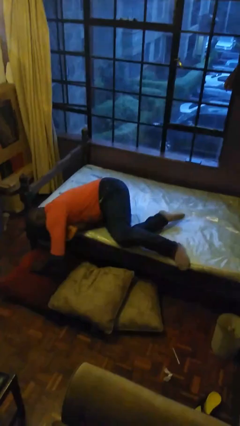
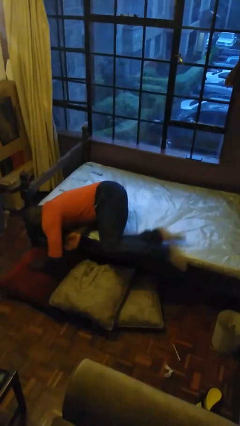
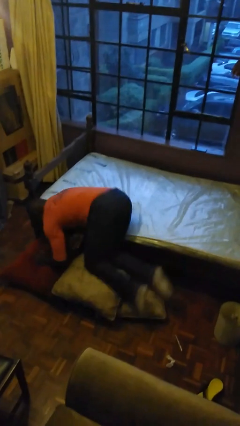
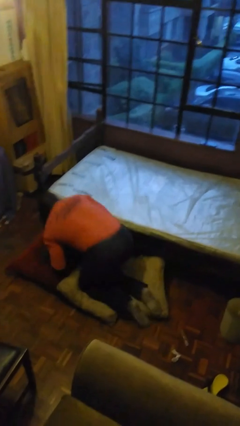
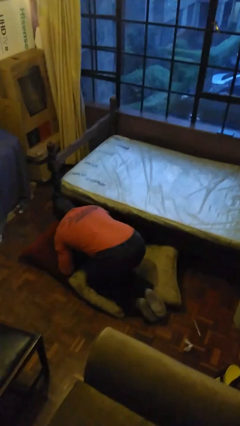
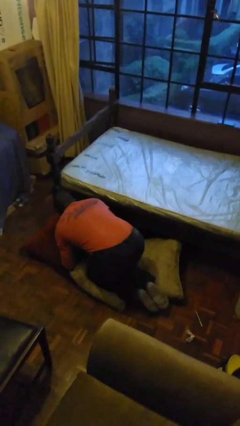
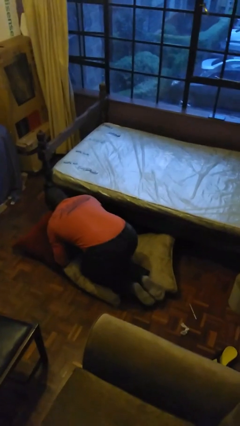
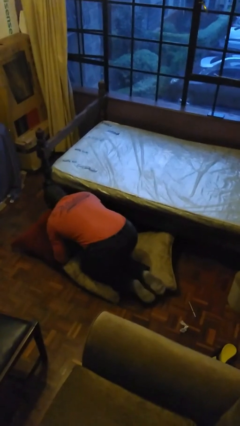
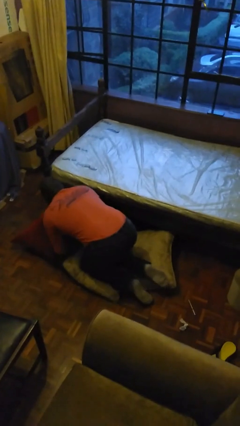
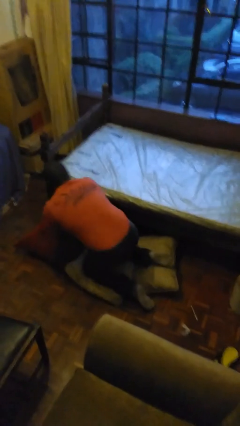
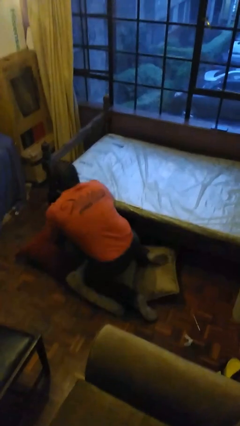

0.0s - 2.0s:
person falls from bed

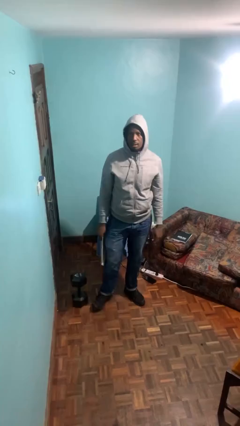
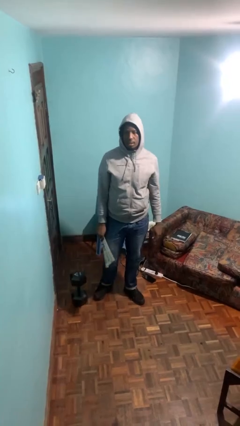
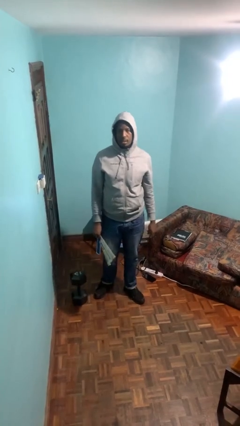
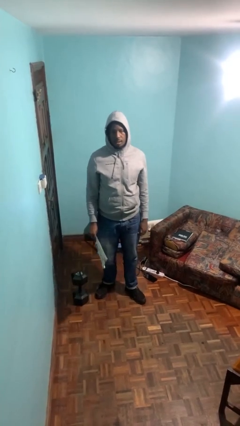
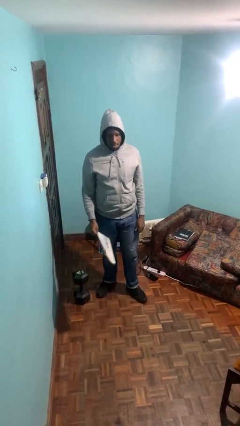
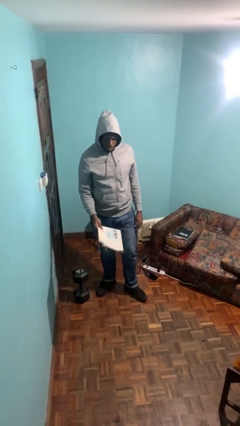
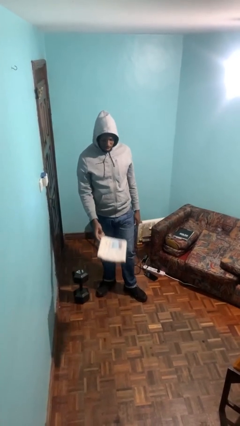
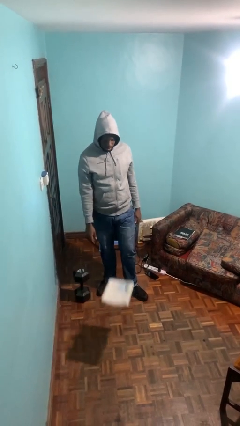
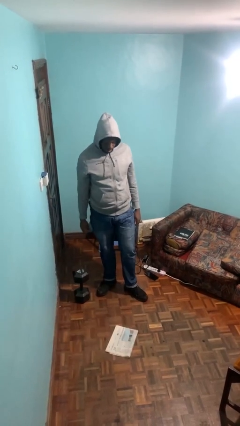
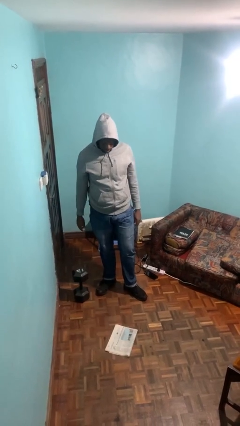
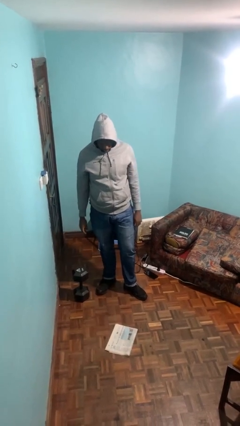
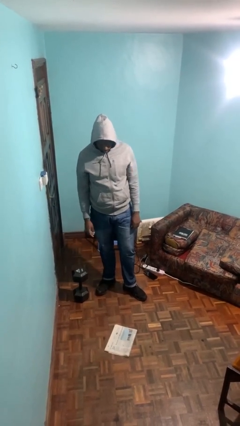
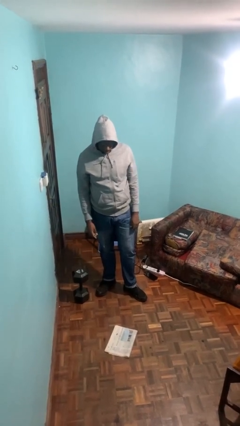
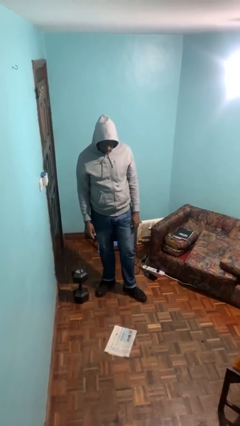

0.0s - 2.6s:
person drops object

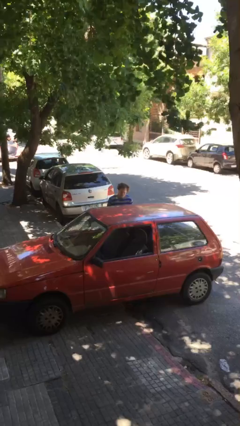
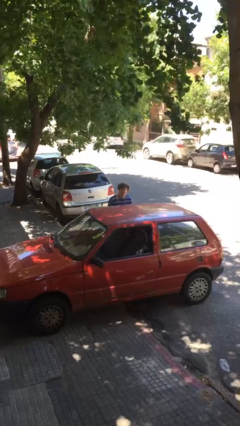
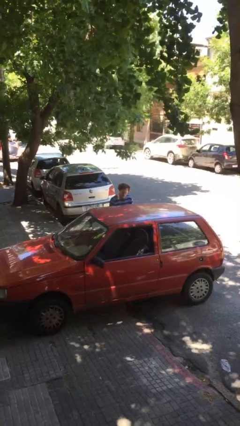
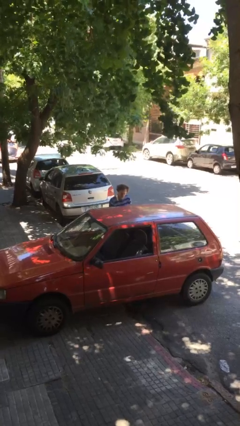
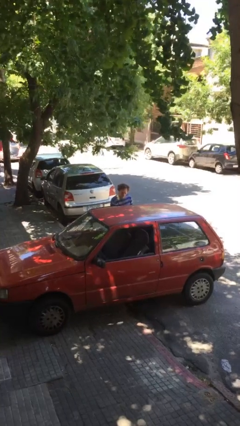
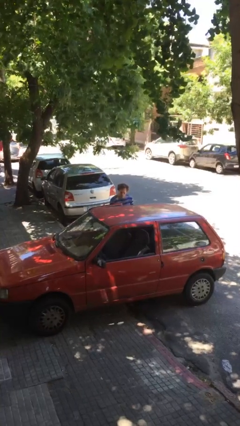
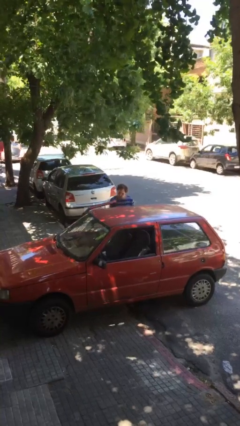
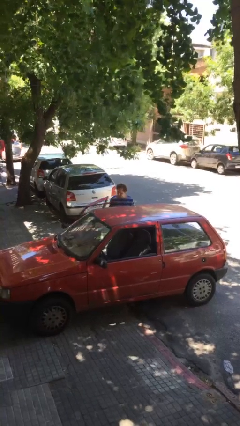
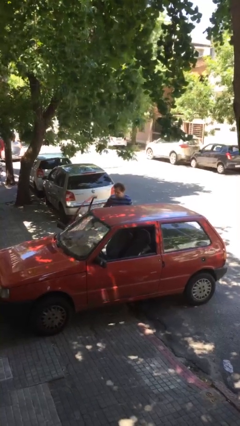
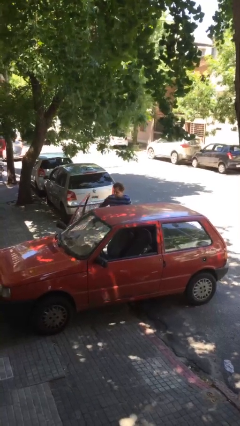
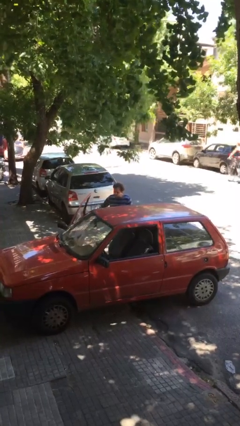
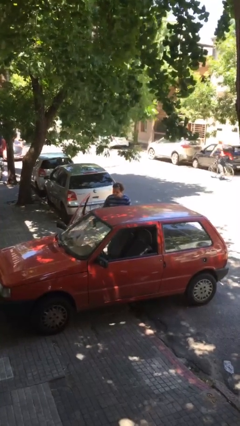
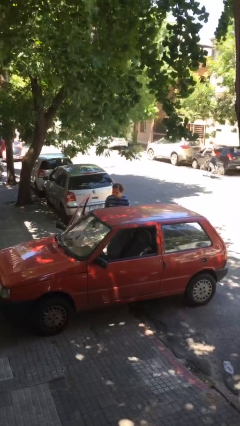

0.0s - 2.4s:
person opens car door

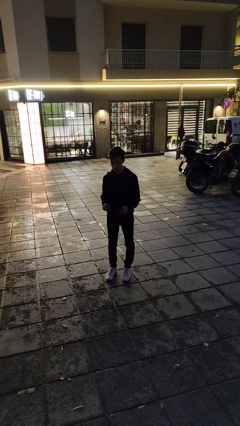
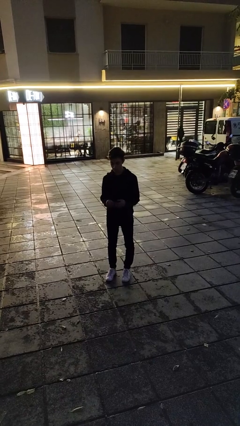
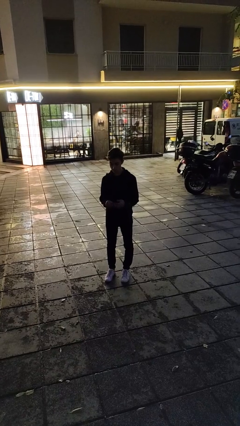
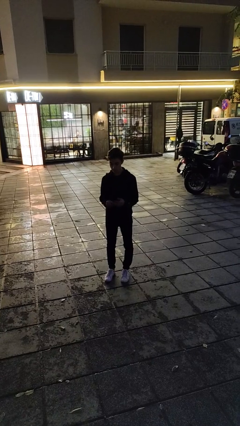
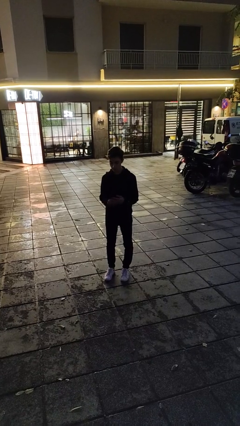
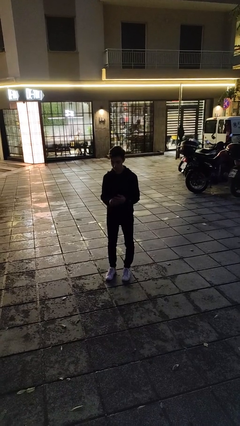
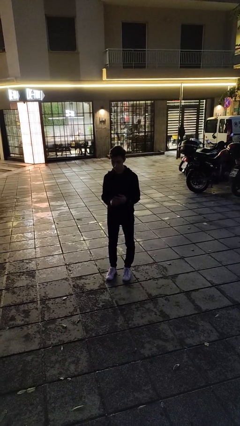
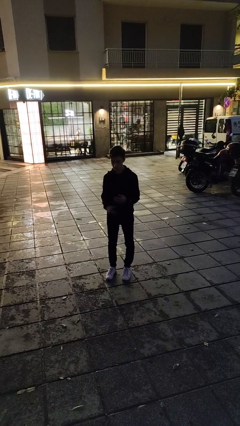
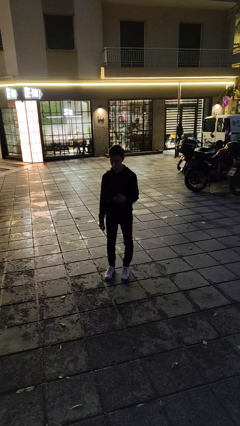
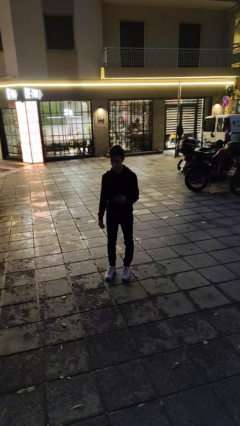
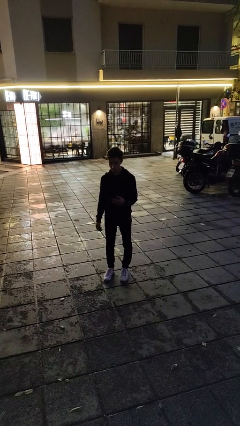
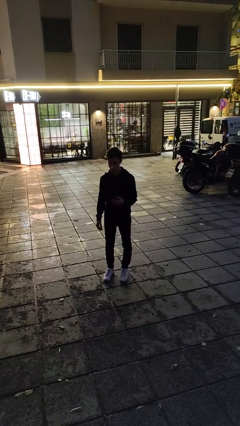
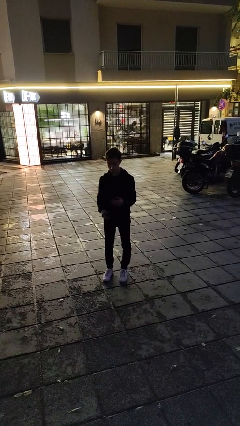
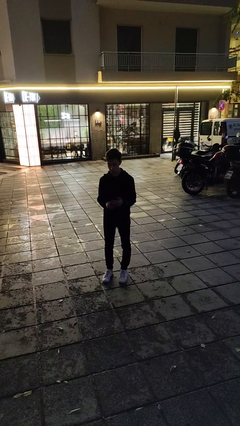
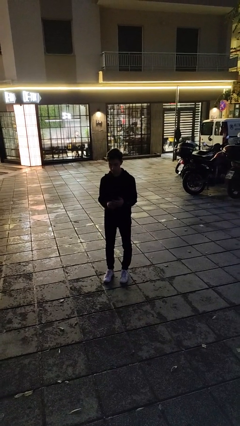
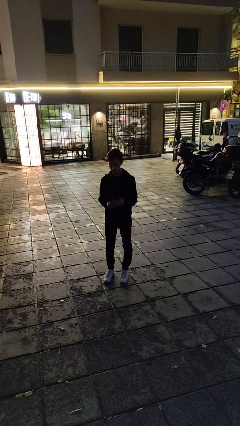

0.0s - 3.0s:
person puts on ring

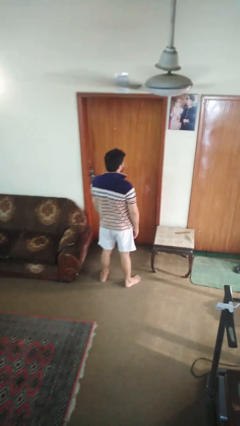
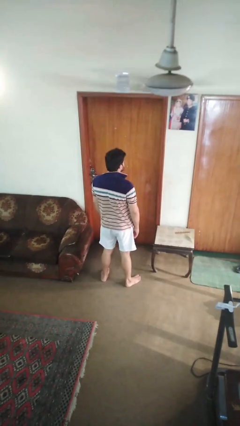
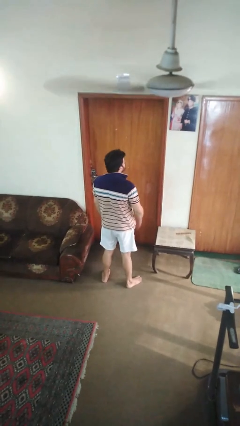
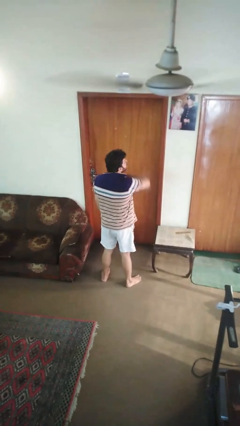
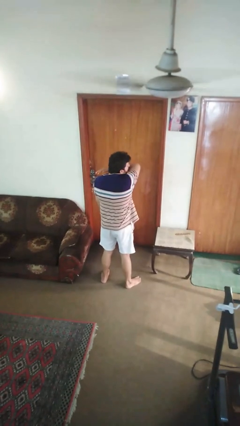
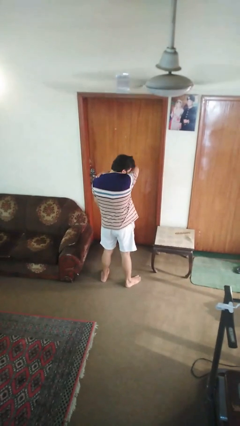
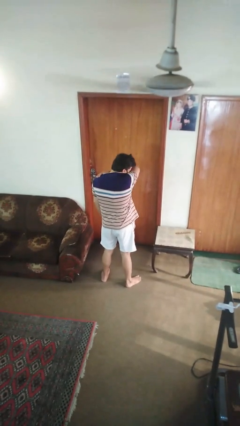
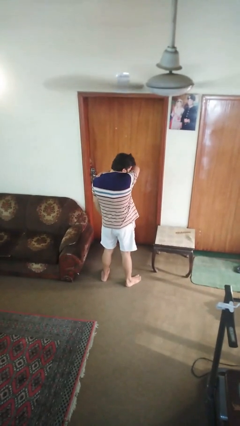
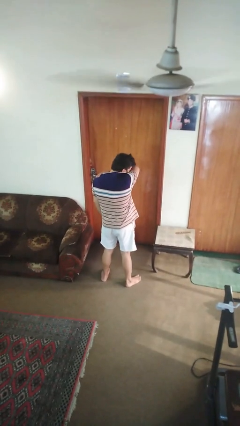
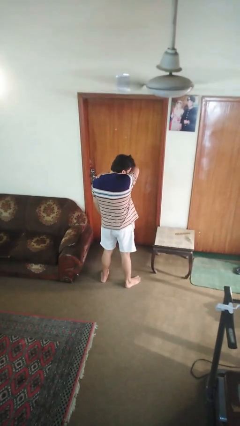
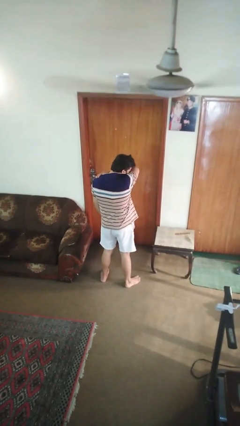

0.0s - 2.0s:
person sneezes into arm

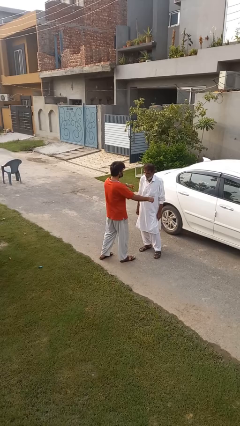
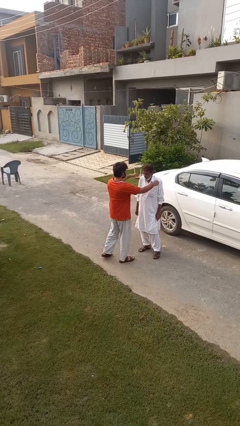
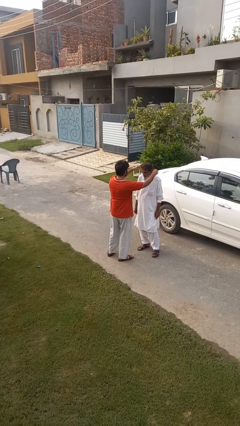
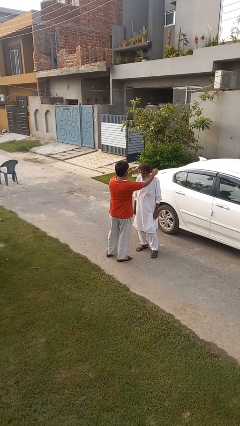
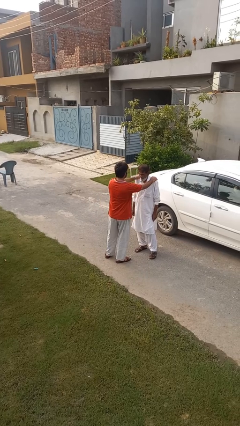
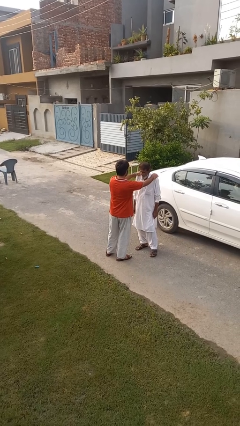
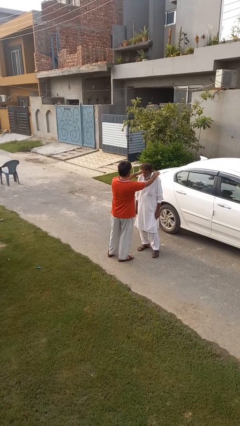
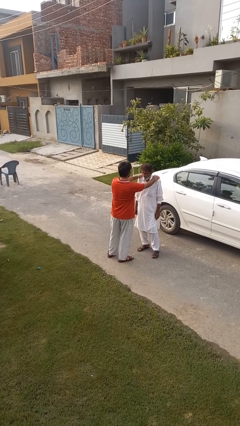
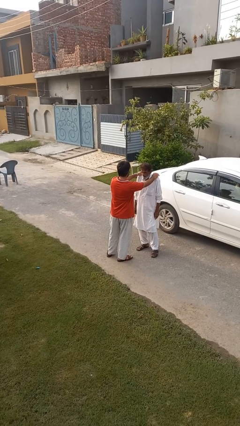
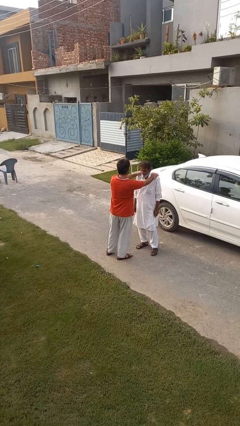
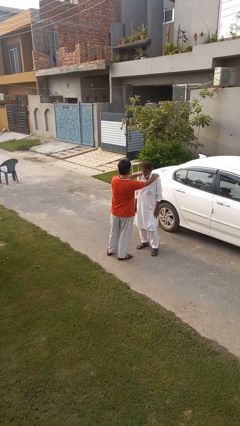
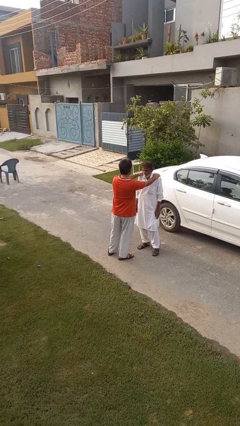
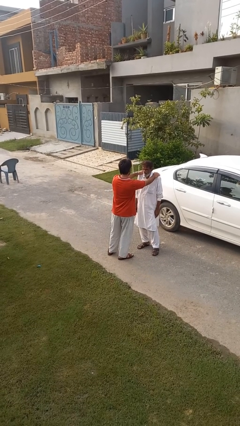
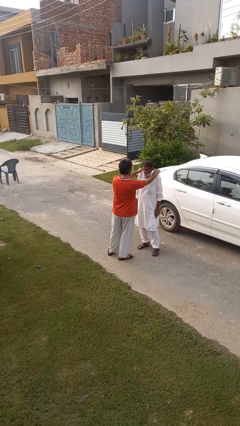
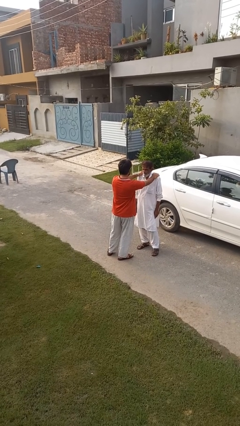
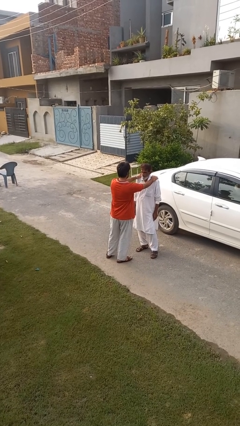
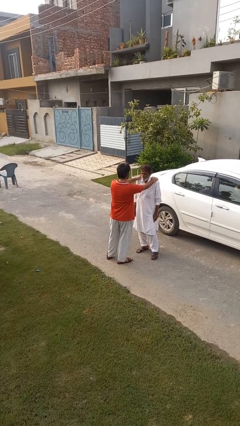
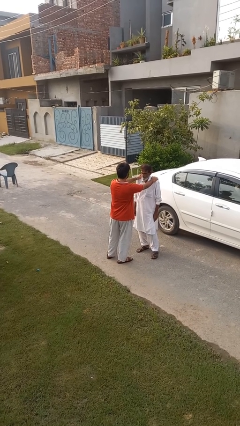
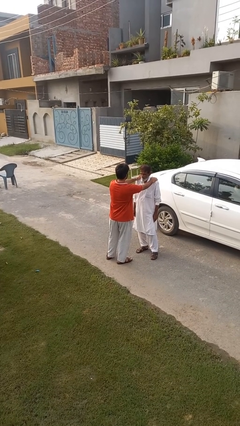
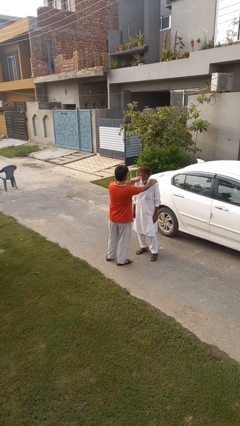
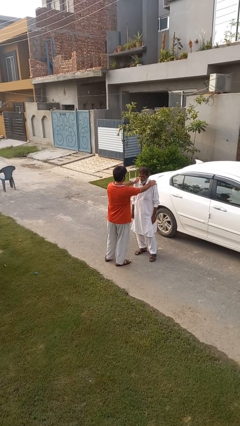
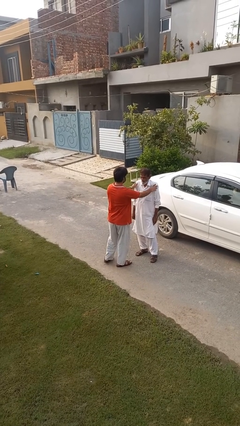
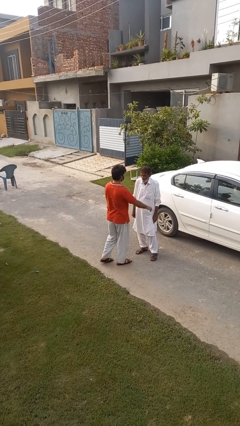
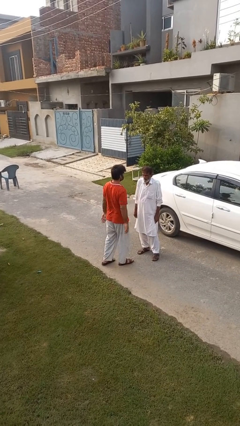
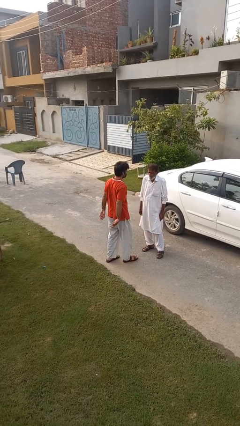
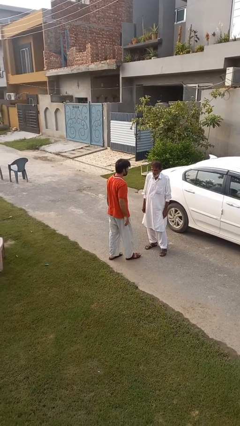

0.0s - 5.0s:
person pounds shoulders of person

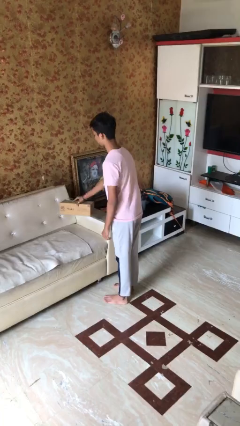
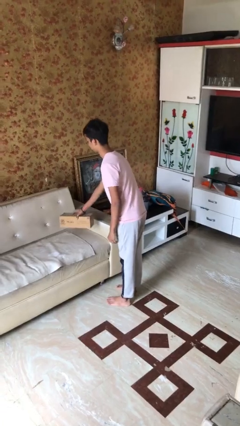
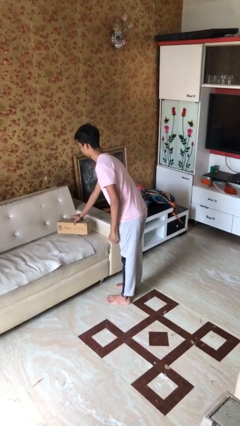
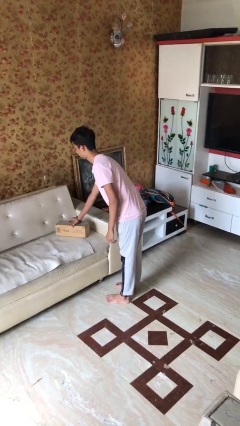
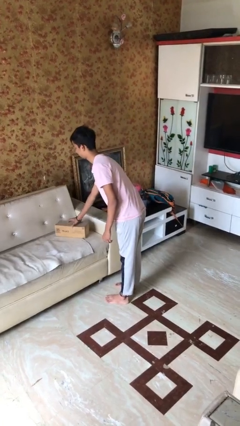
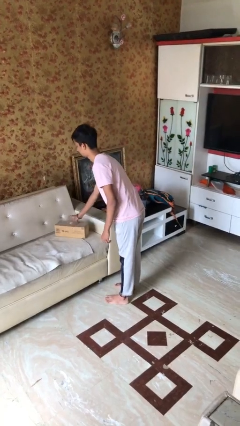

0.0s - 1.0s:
person puts down object on couch
